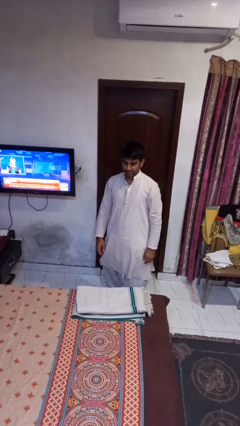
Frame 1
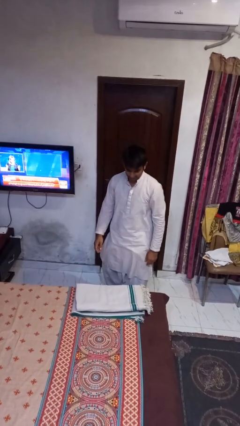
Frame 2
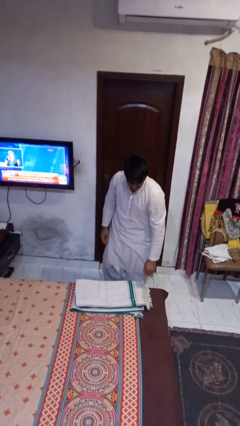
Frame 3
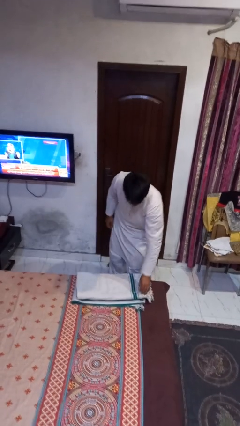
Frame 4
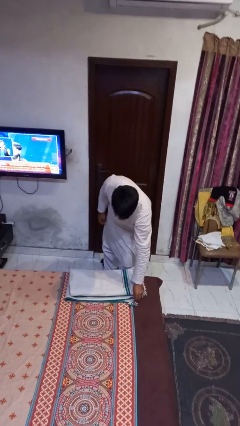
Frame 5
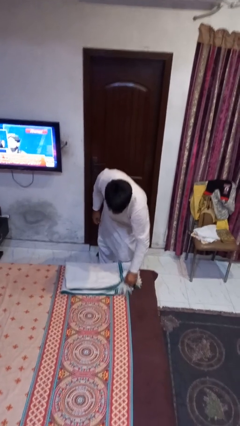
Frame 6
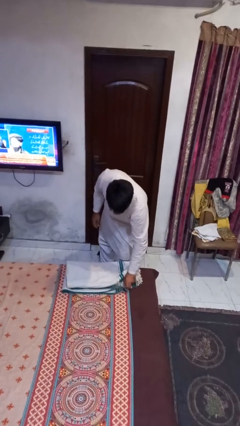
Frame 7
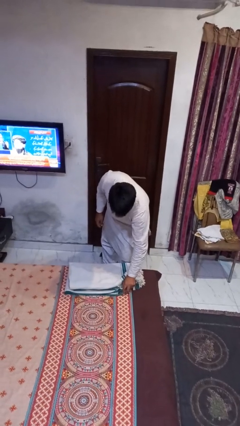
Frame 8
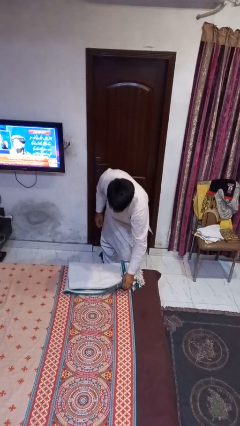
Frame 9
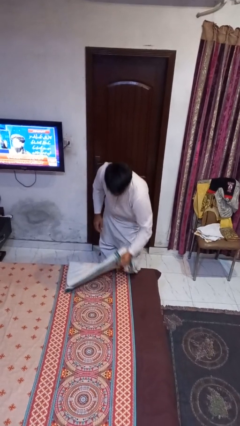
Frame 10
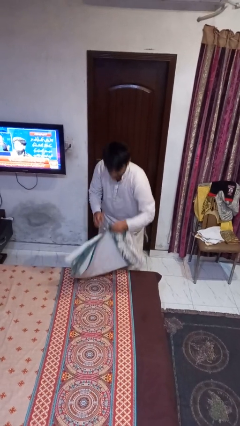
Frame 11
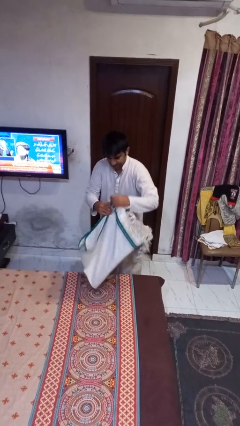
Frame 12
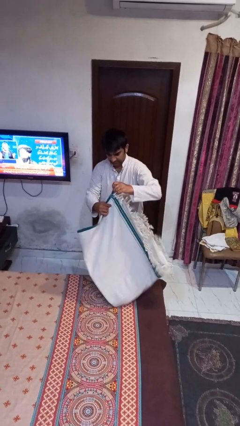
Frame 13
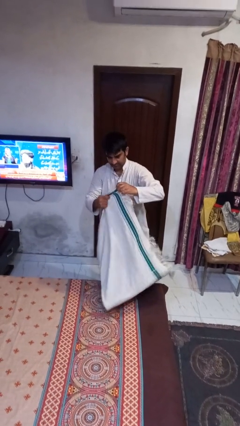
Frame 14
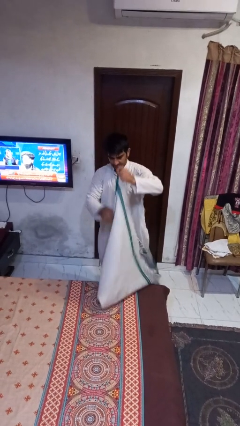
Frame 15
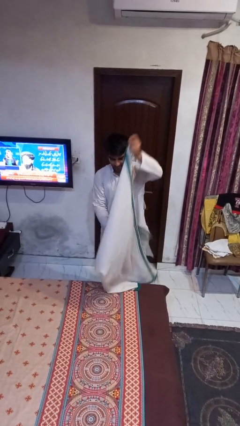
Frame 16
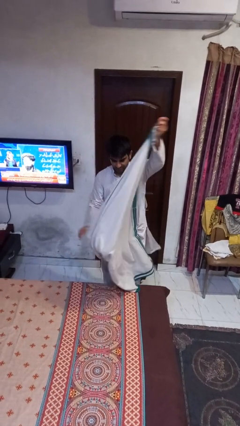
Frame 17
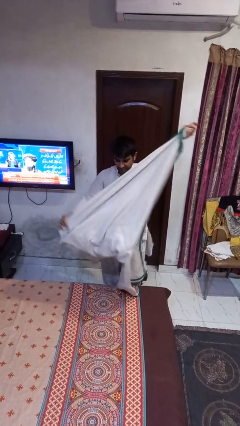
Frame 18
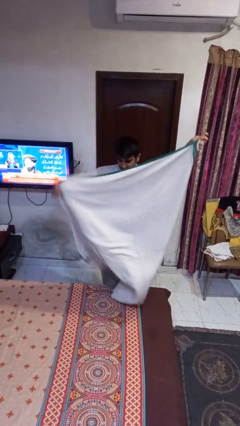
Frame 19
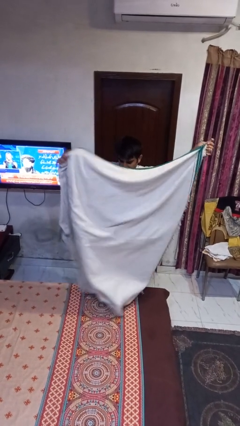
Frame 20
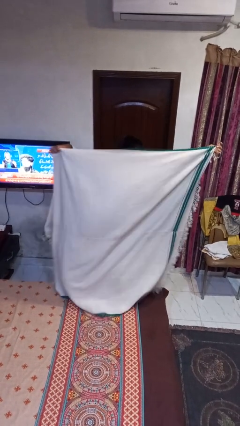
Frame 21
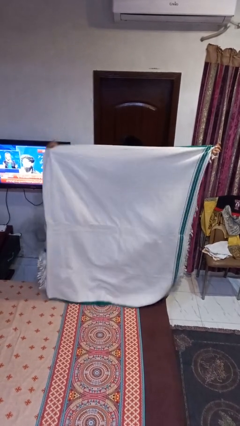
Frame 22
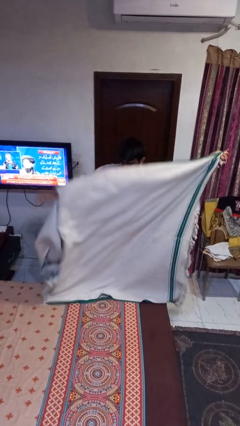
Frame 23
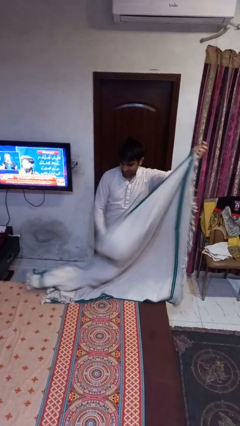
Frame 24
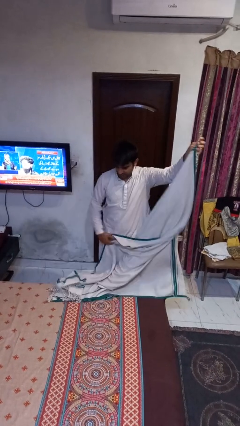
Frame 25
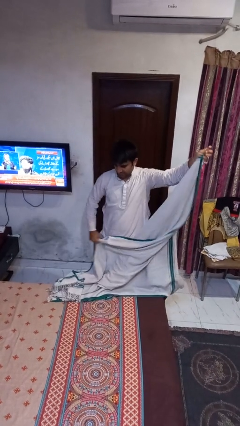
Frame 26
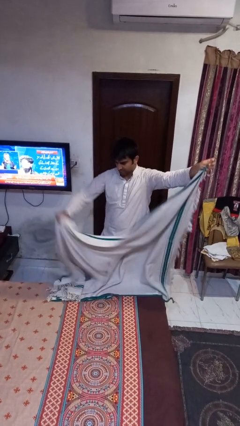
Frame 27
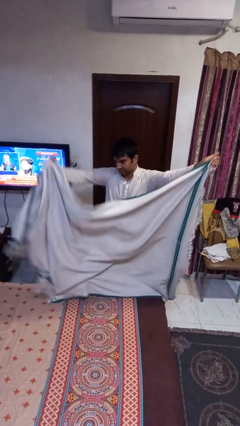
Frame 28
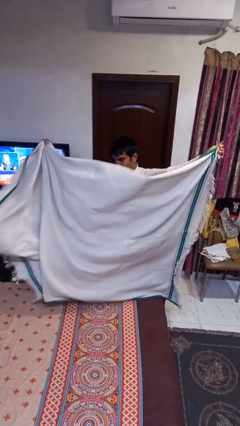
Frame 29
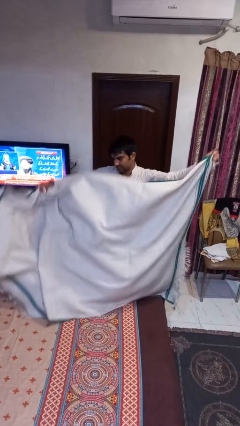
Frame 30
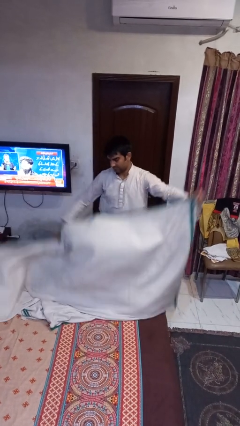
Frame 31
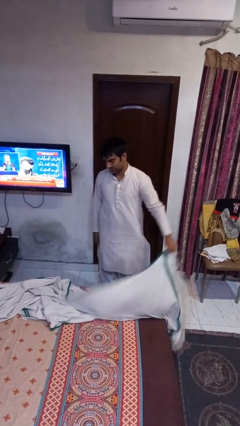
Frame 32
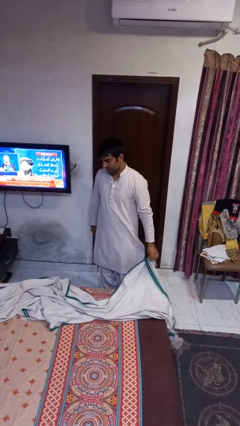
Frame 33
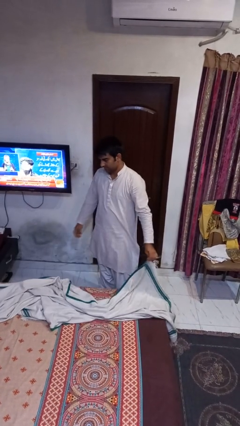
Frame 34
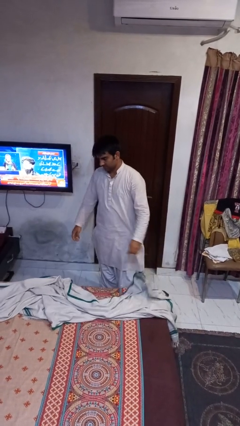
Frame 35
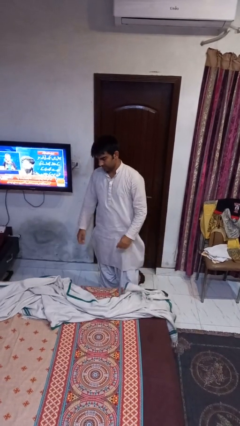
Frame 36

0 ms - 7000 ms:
person unfolds blanket

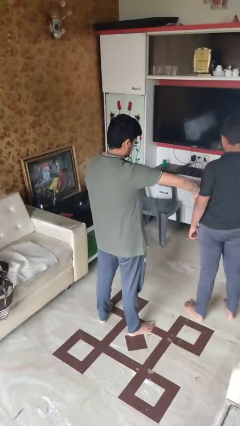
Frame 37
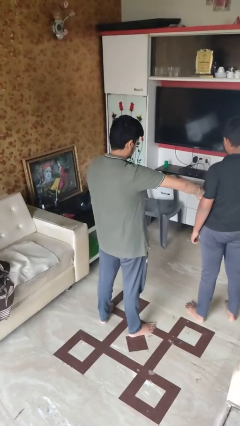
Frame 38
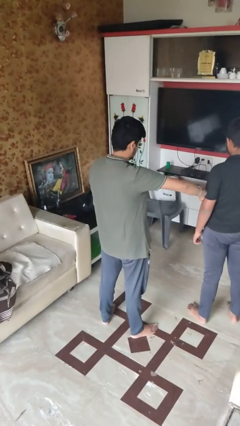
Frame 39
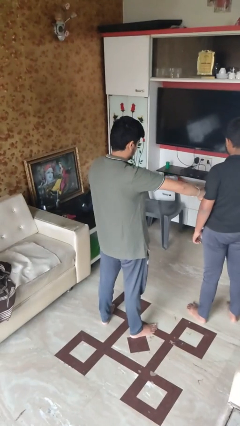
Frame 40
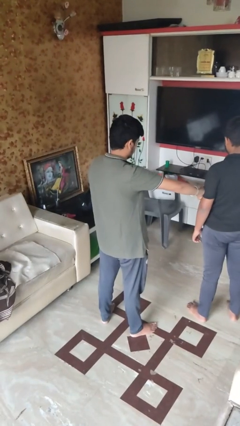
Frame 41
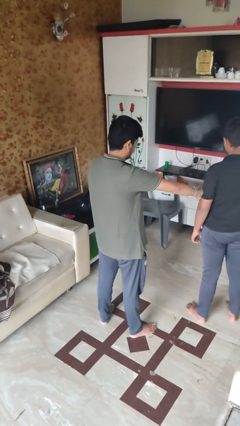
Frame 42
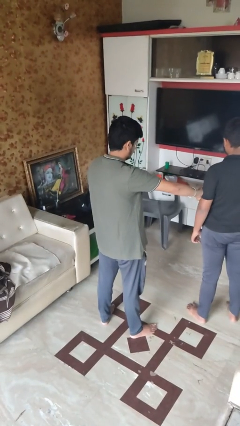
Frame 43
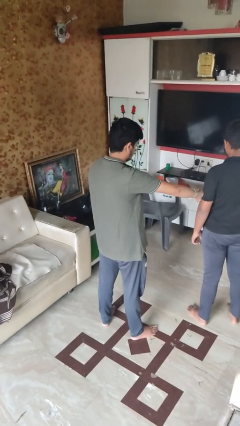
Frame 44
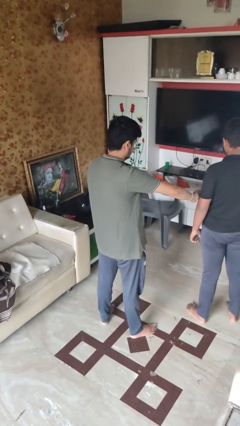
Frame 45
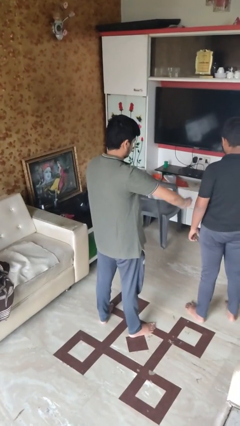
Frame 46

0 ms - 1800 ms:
person grabs person by bicep

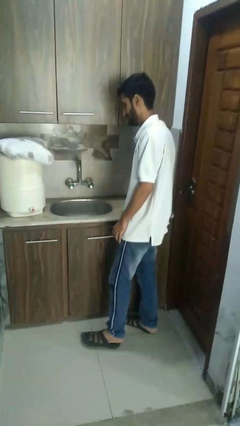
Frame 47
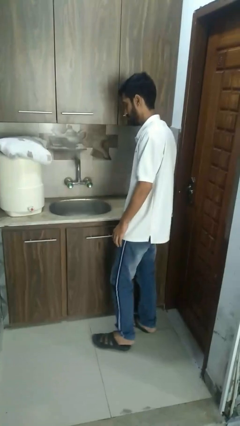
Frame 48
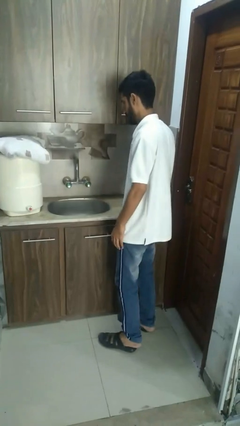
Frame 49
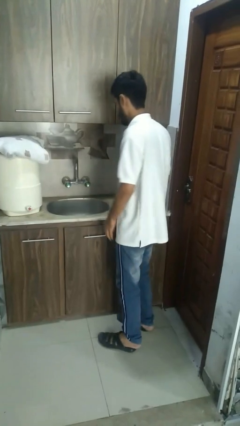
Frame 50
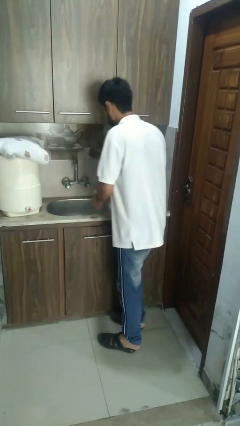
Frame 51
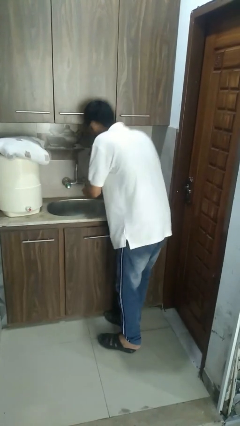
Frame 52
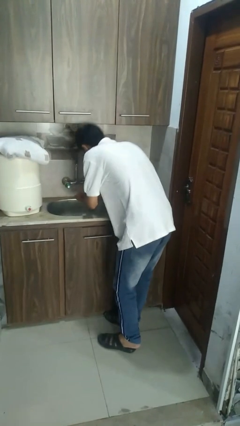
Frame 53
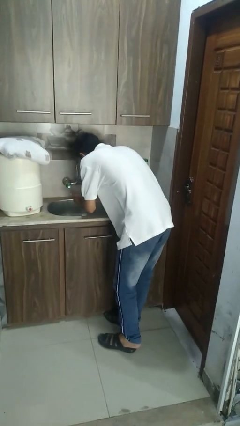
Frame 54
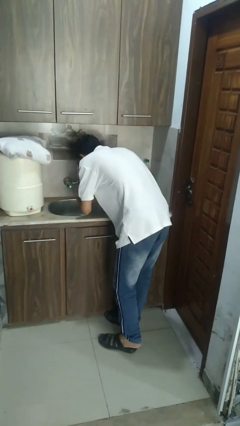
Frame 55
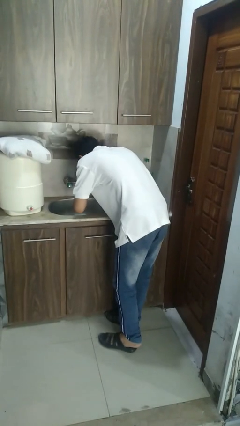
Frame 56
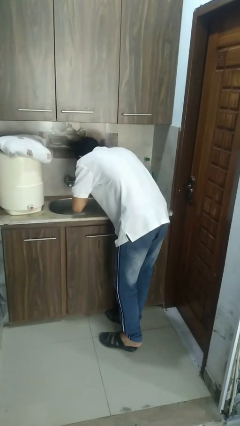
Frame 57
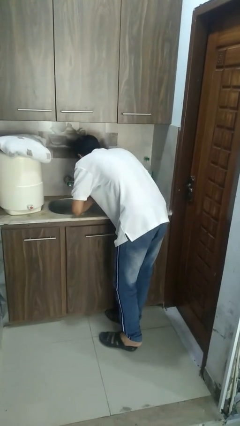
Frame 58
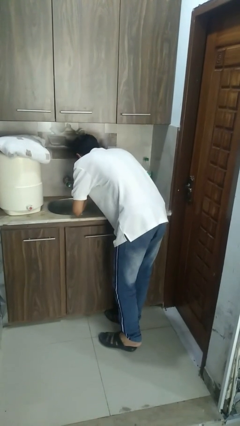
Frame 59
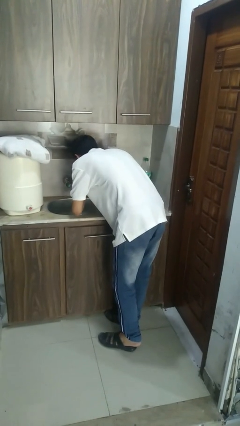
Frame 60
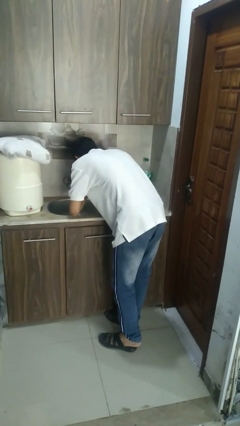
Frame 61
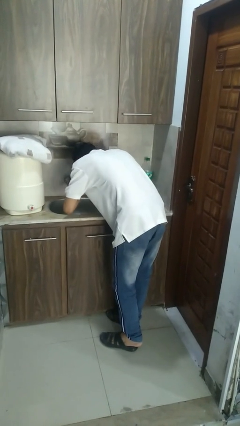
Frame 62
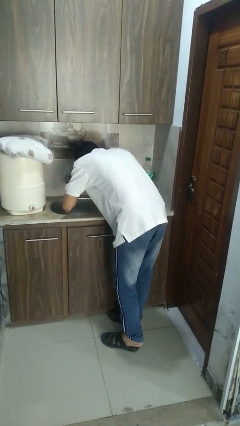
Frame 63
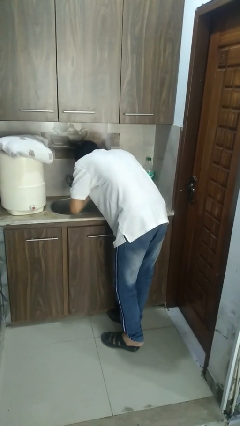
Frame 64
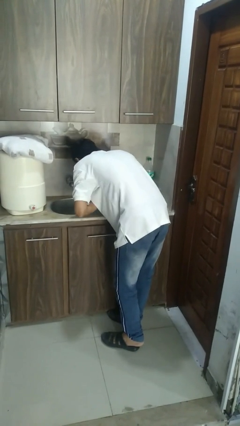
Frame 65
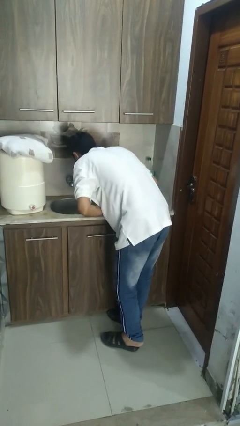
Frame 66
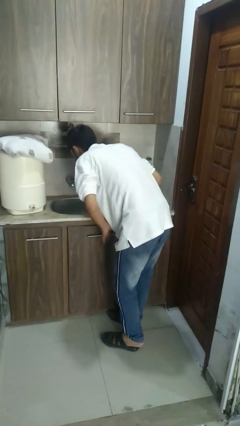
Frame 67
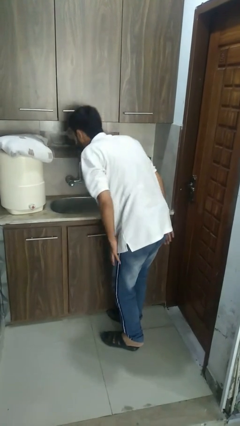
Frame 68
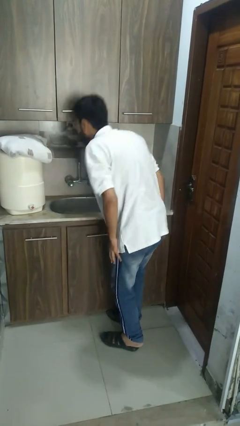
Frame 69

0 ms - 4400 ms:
person washes face

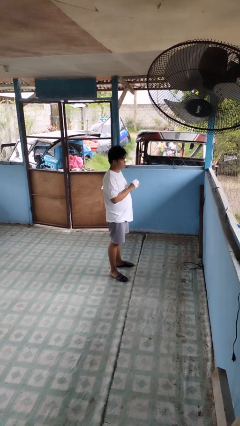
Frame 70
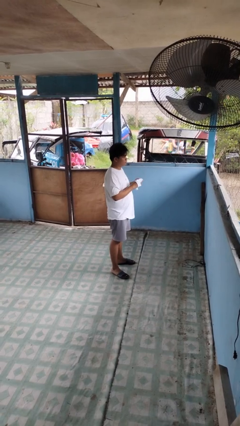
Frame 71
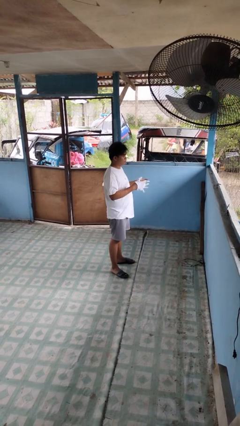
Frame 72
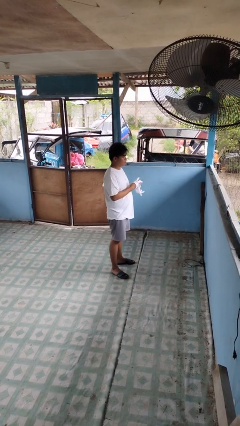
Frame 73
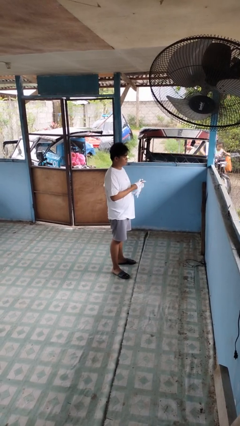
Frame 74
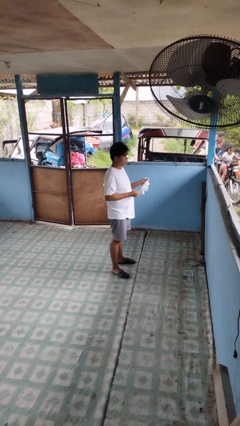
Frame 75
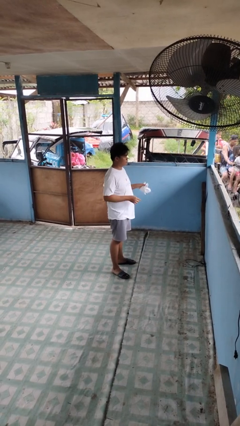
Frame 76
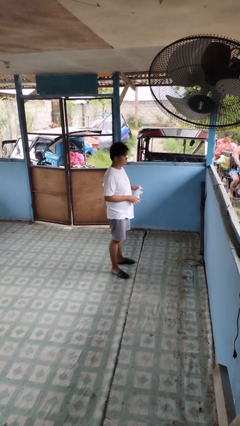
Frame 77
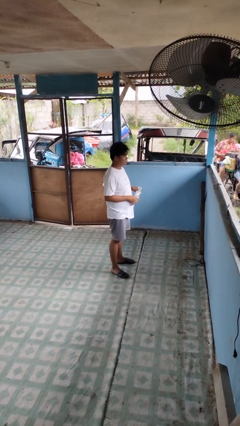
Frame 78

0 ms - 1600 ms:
person takes off gloves

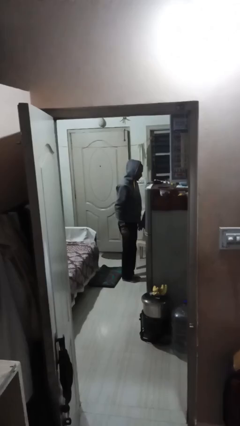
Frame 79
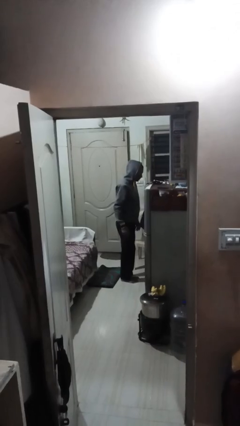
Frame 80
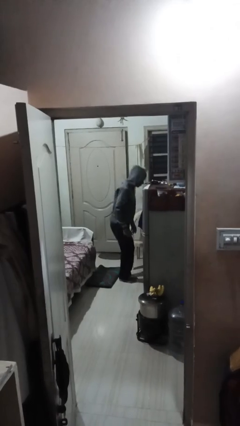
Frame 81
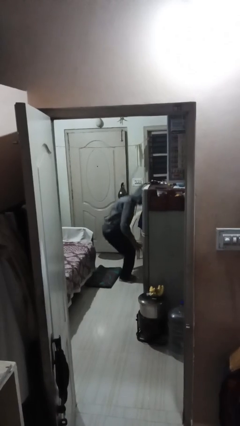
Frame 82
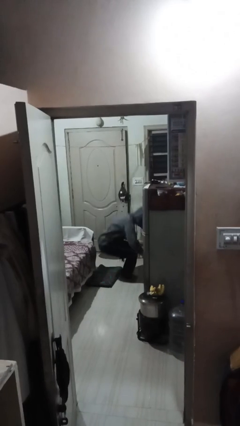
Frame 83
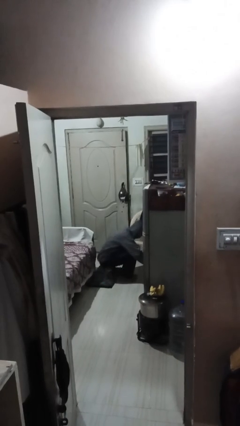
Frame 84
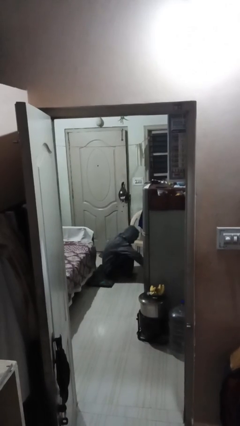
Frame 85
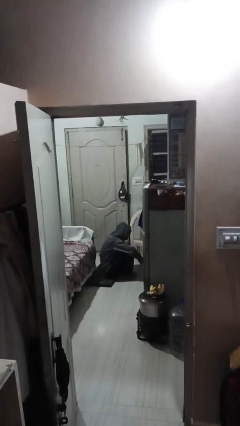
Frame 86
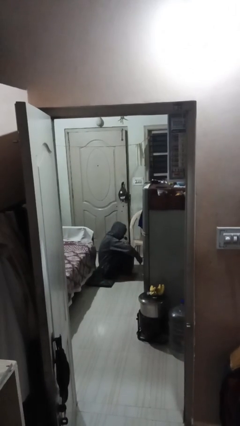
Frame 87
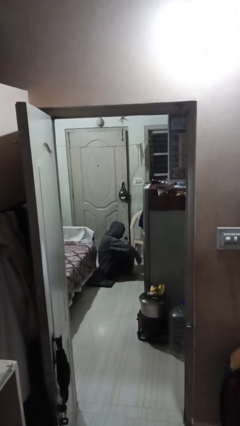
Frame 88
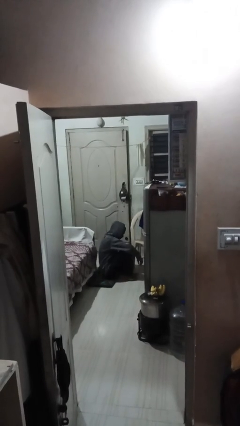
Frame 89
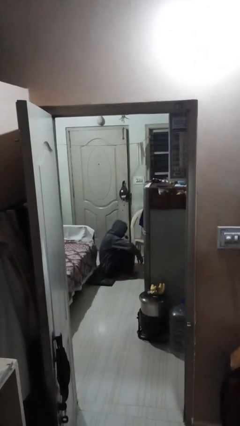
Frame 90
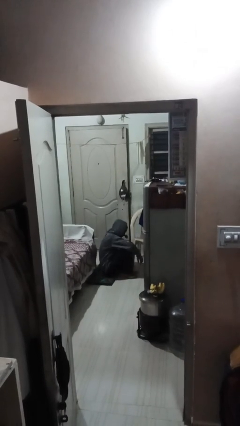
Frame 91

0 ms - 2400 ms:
person sits down

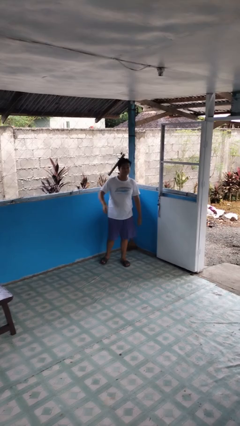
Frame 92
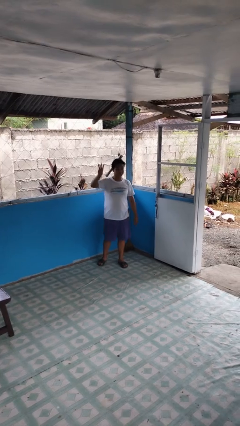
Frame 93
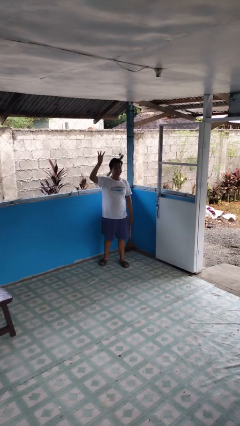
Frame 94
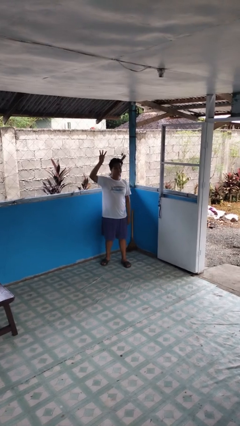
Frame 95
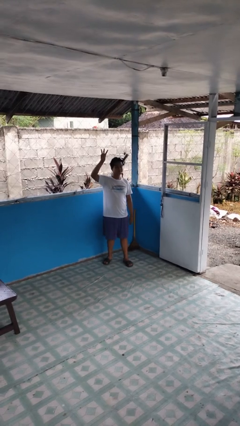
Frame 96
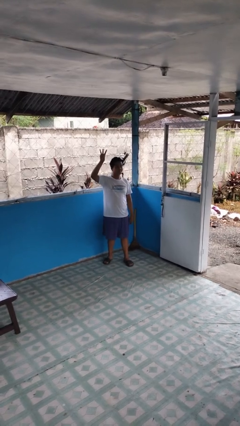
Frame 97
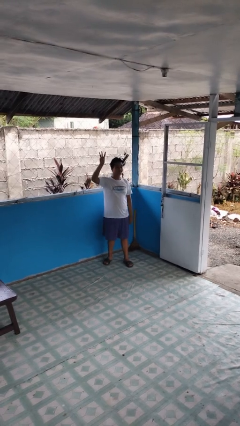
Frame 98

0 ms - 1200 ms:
person gestures number three
